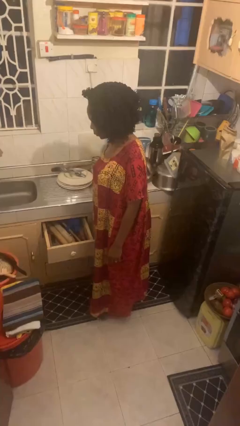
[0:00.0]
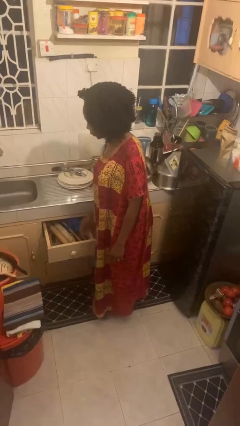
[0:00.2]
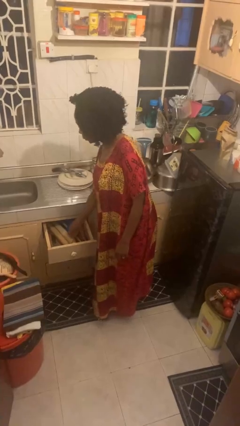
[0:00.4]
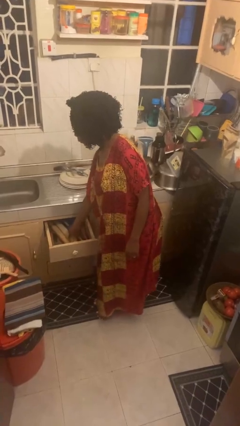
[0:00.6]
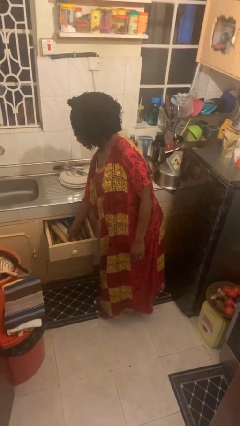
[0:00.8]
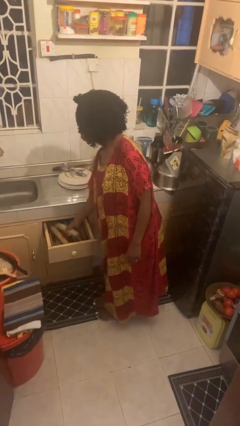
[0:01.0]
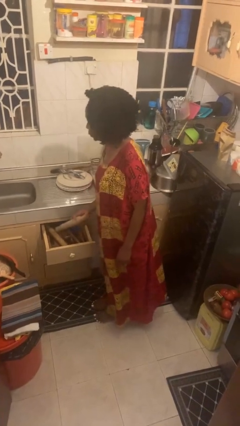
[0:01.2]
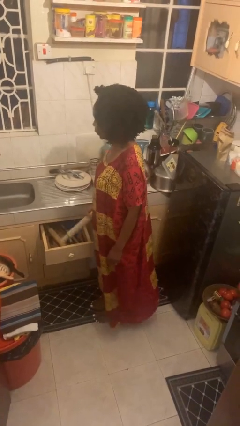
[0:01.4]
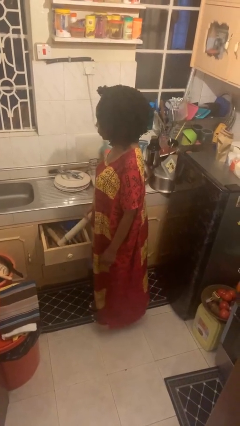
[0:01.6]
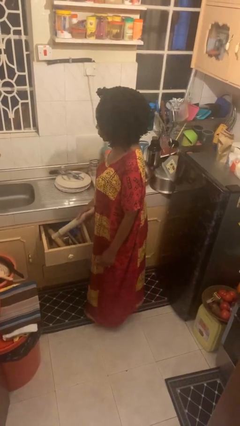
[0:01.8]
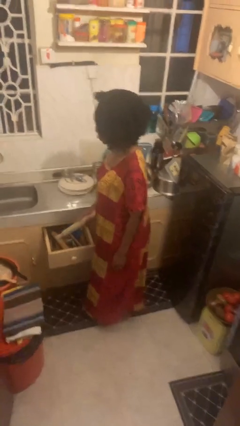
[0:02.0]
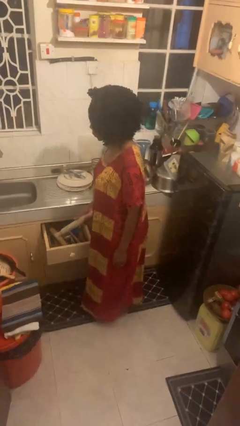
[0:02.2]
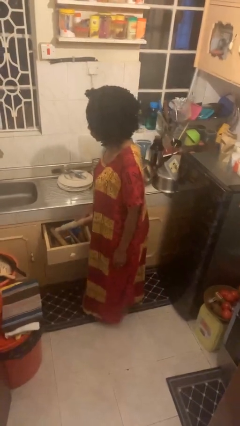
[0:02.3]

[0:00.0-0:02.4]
person takes object from kitchen drawer

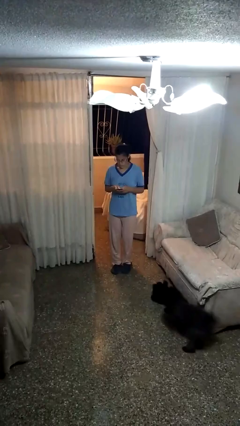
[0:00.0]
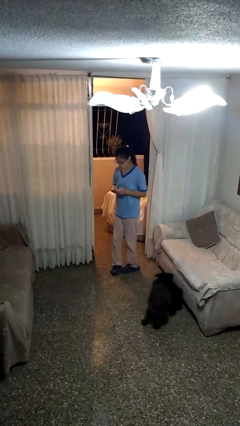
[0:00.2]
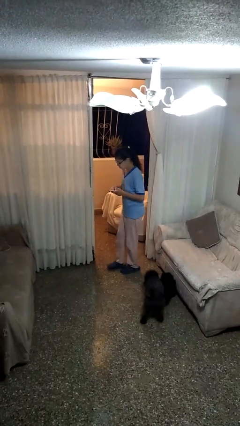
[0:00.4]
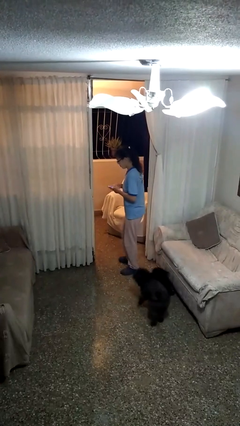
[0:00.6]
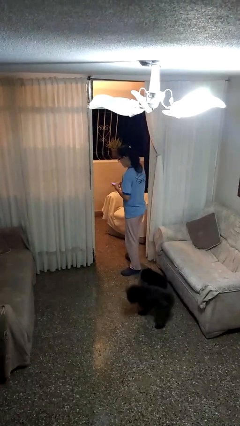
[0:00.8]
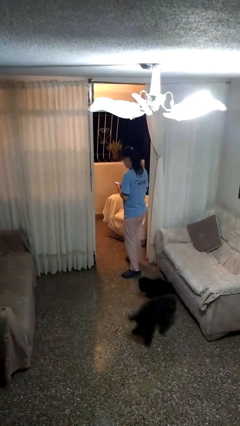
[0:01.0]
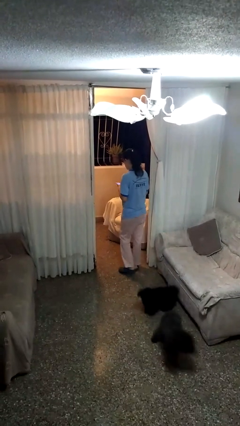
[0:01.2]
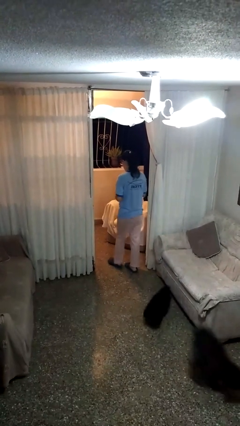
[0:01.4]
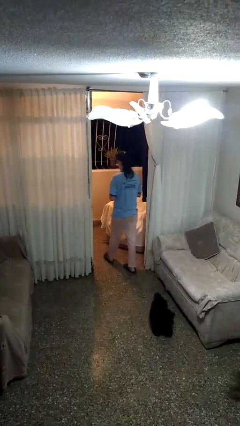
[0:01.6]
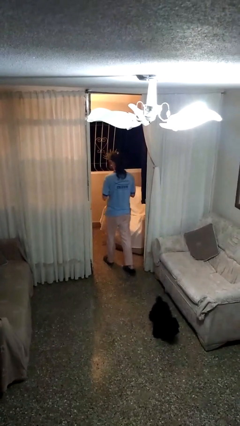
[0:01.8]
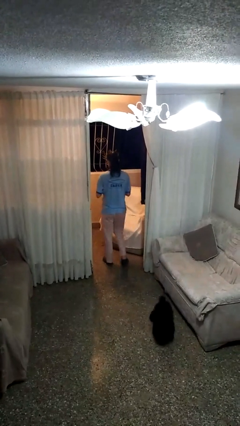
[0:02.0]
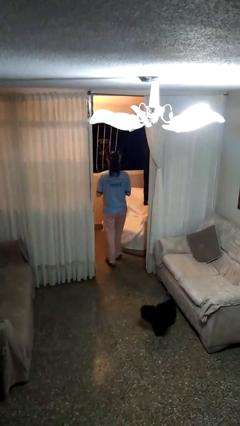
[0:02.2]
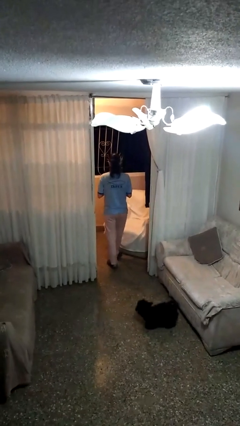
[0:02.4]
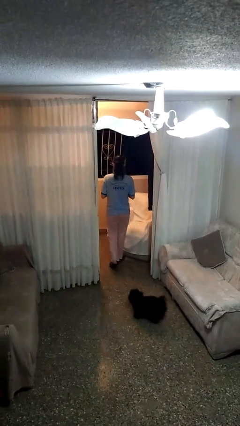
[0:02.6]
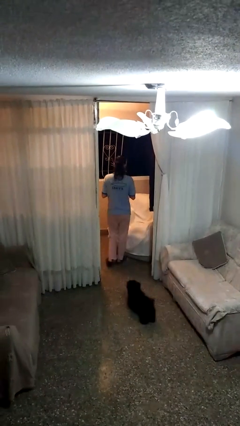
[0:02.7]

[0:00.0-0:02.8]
person exits scene through structure

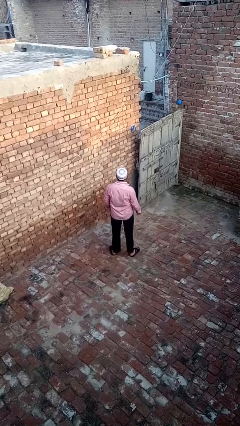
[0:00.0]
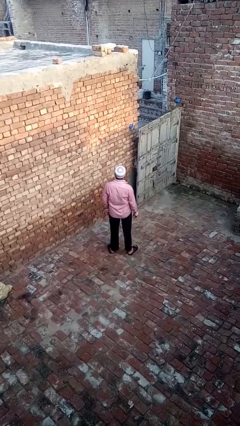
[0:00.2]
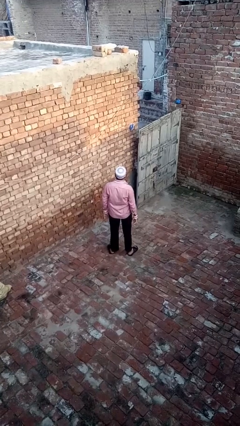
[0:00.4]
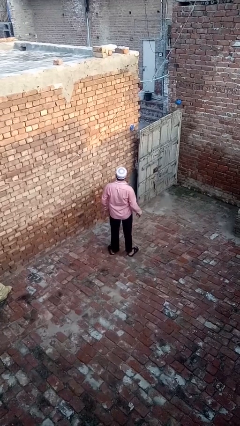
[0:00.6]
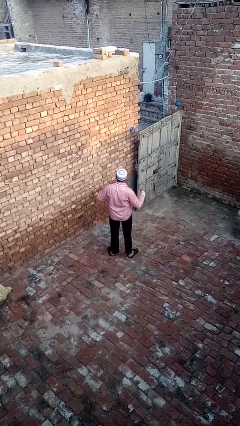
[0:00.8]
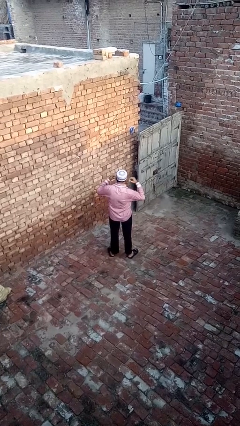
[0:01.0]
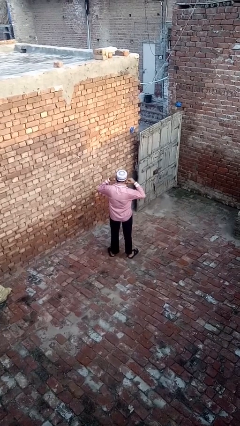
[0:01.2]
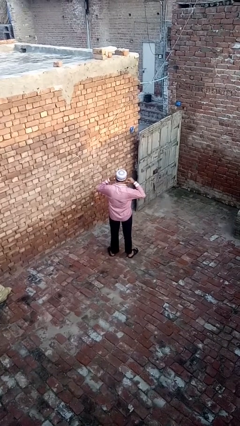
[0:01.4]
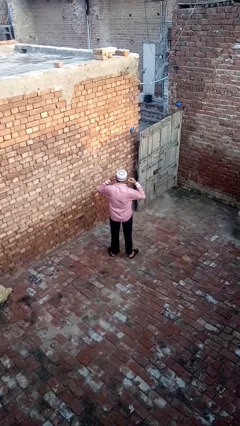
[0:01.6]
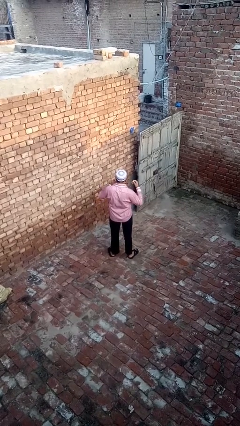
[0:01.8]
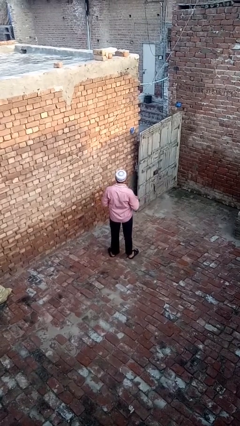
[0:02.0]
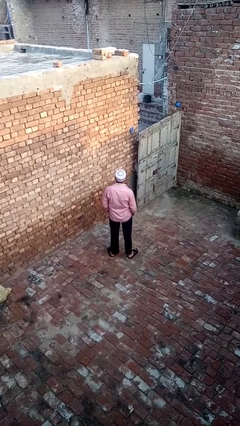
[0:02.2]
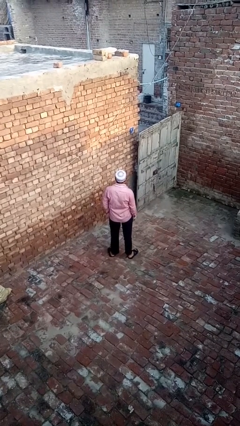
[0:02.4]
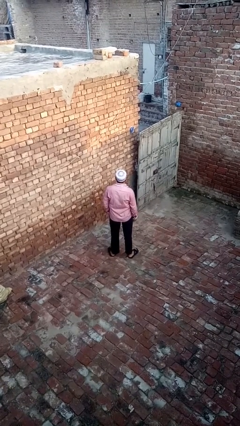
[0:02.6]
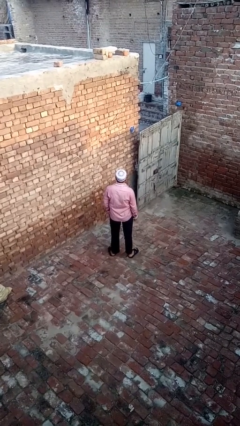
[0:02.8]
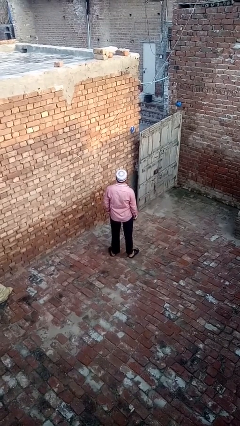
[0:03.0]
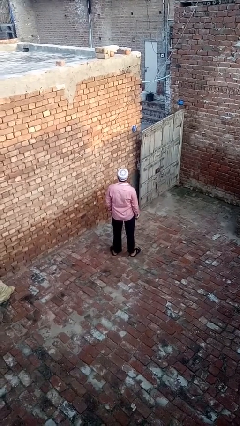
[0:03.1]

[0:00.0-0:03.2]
person takes off headphones

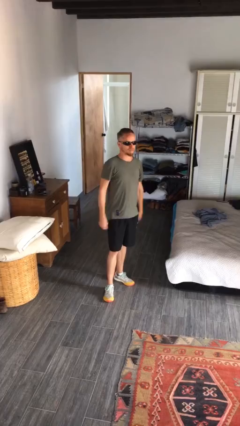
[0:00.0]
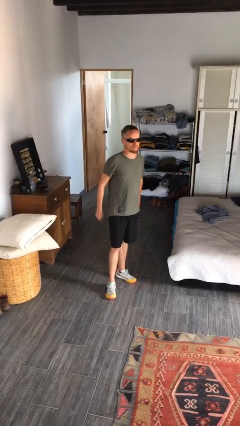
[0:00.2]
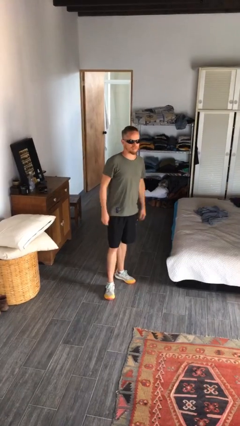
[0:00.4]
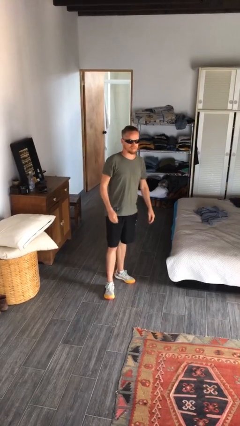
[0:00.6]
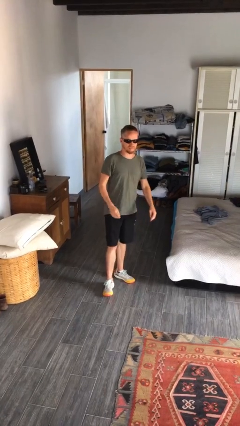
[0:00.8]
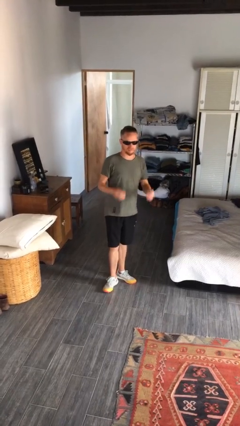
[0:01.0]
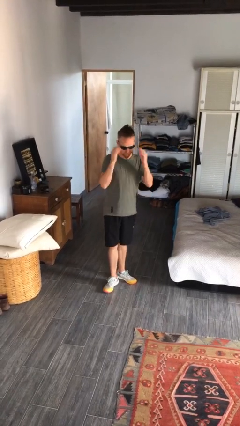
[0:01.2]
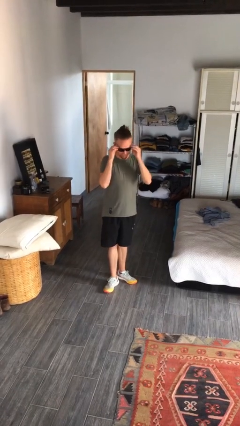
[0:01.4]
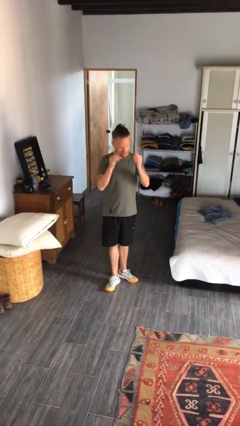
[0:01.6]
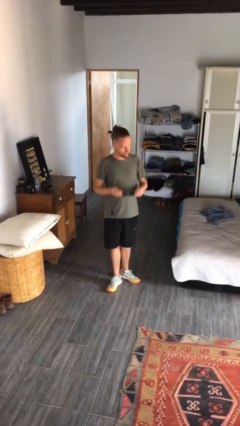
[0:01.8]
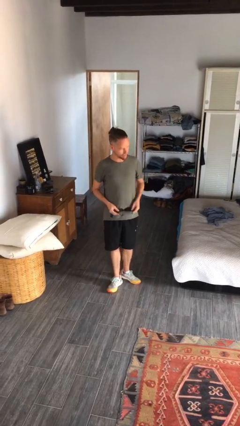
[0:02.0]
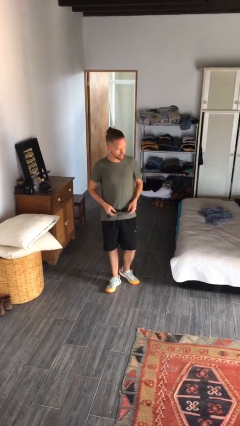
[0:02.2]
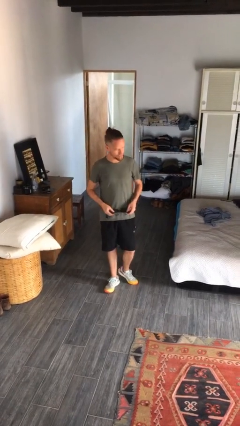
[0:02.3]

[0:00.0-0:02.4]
person takes off sunglasses

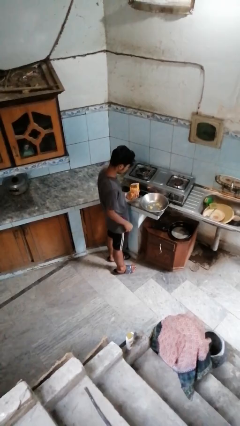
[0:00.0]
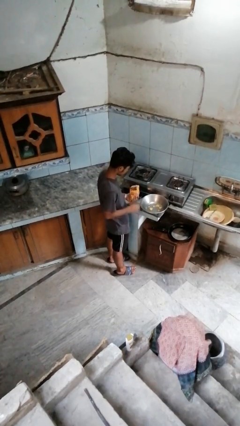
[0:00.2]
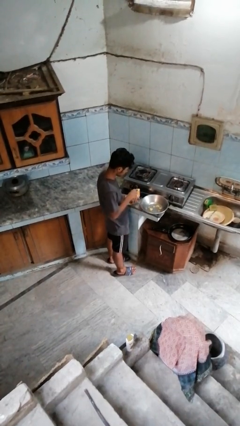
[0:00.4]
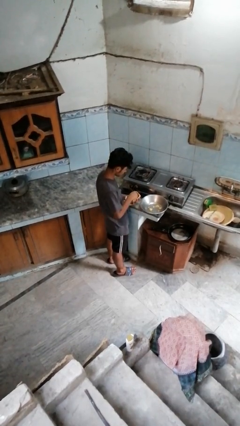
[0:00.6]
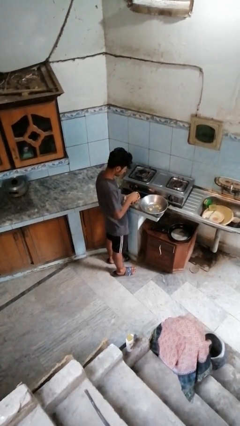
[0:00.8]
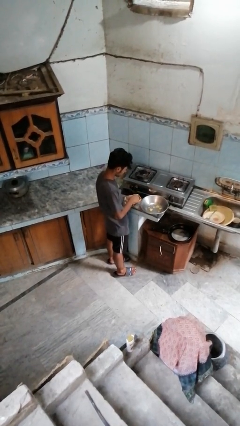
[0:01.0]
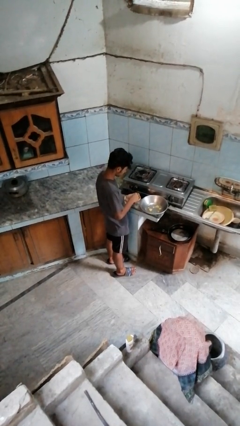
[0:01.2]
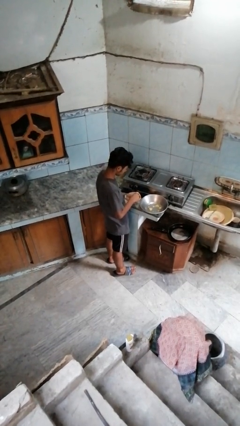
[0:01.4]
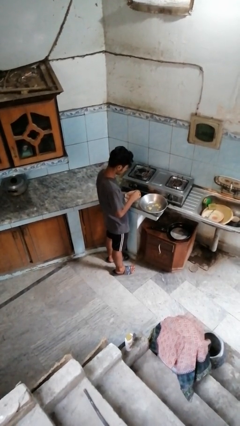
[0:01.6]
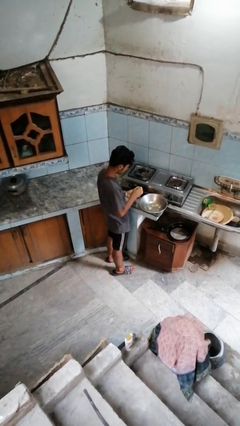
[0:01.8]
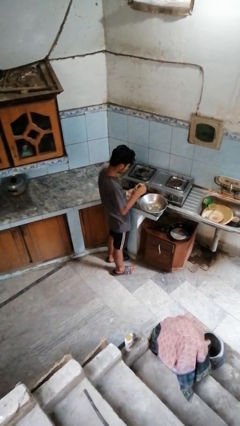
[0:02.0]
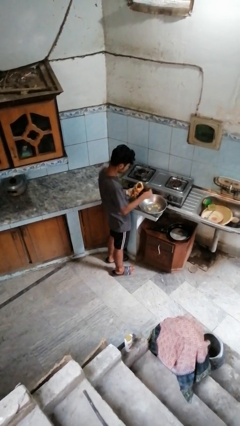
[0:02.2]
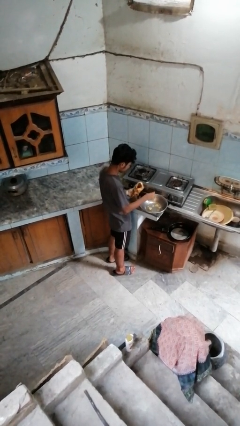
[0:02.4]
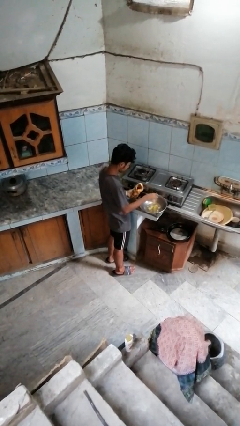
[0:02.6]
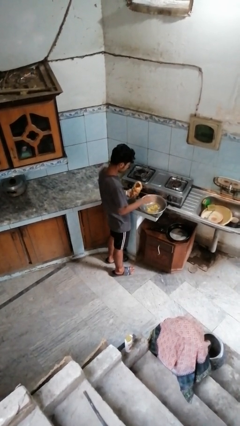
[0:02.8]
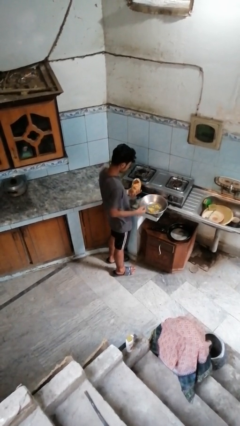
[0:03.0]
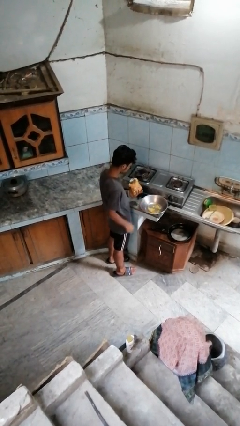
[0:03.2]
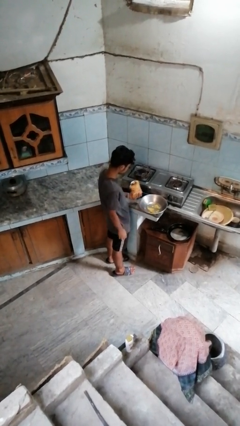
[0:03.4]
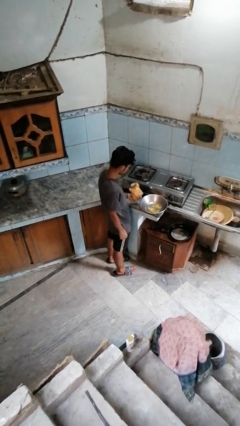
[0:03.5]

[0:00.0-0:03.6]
person pours into bowl

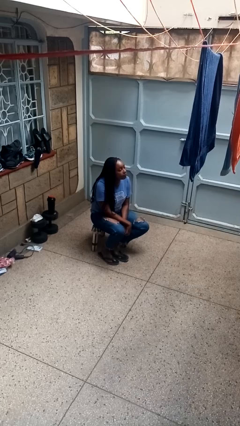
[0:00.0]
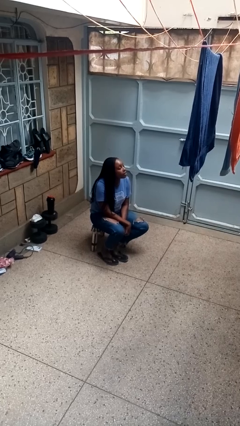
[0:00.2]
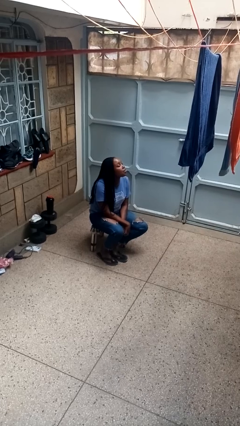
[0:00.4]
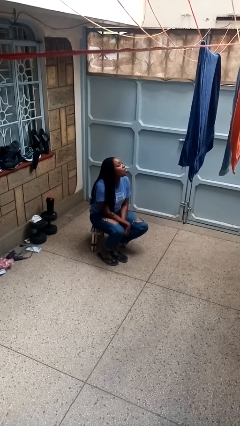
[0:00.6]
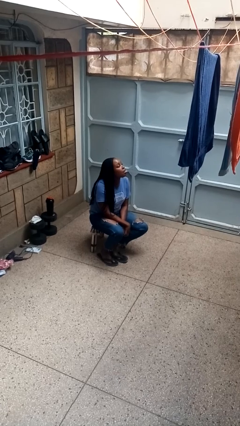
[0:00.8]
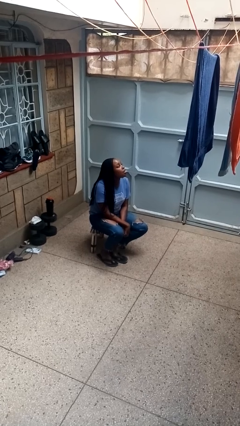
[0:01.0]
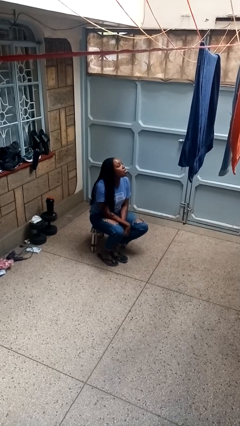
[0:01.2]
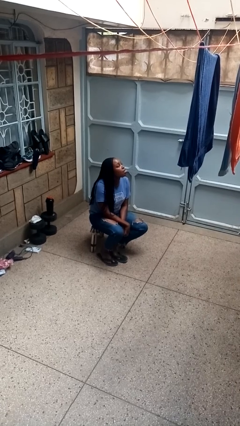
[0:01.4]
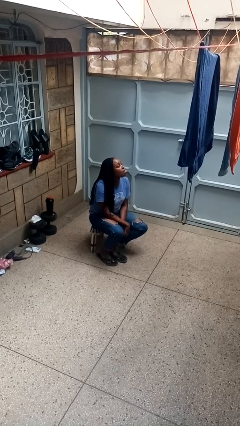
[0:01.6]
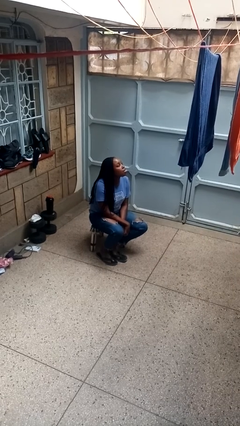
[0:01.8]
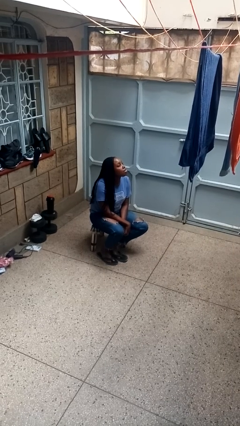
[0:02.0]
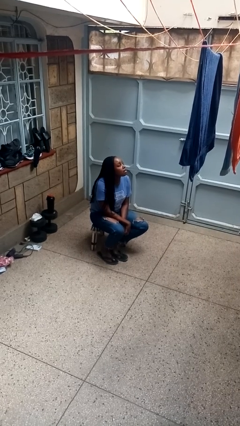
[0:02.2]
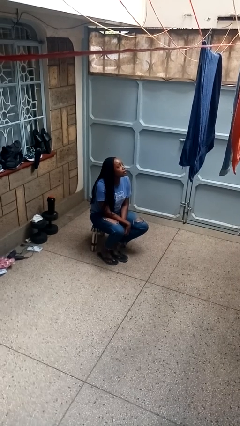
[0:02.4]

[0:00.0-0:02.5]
person sticks out tongue

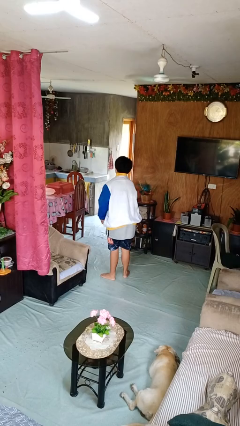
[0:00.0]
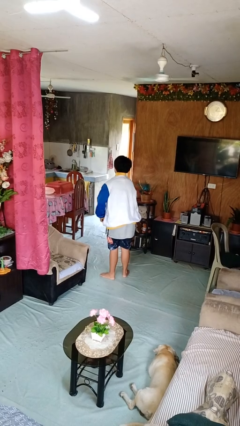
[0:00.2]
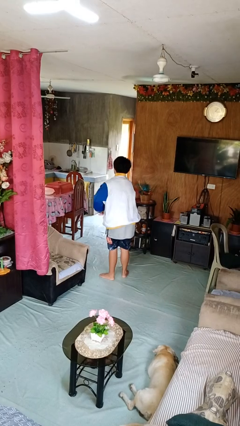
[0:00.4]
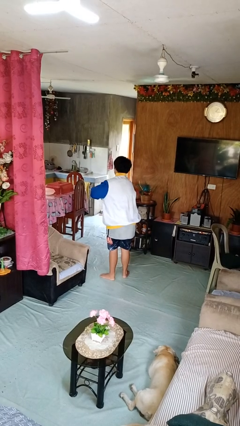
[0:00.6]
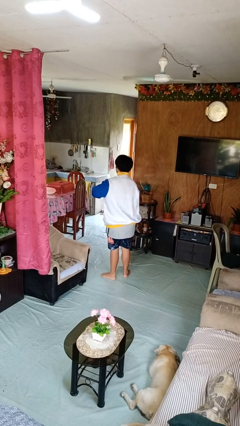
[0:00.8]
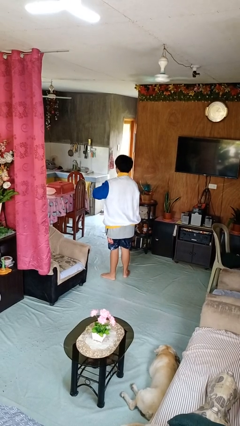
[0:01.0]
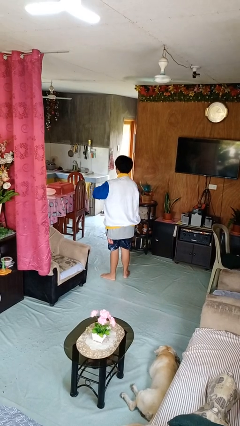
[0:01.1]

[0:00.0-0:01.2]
person zips up jacket
